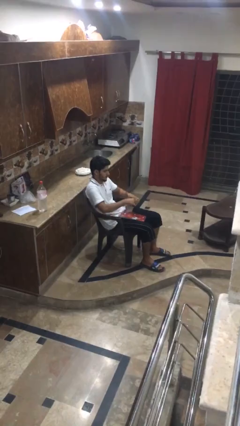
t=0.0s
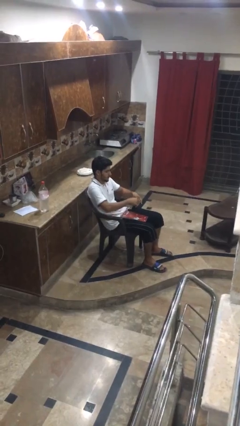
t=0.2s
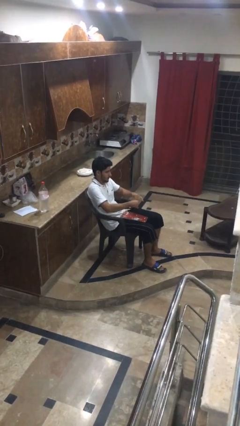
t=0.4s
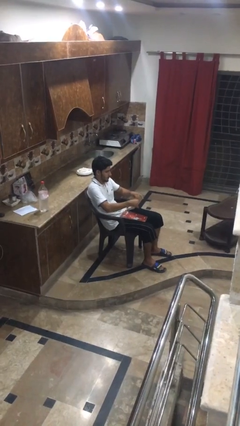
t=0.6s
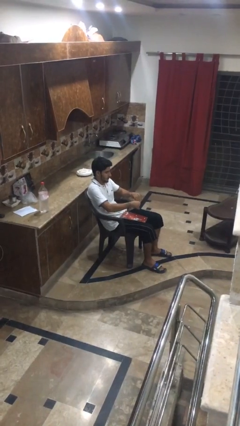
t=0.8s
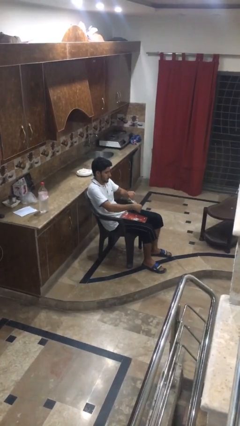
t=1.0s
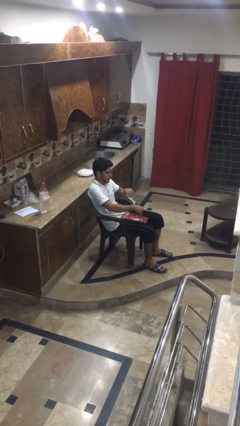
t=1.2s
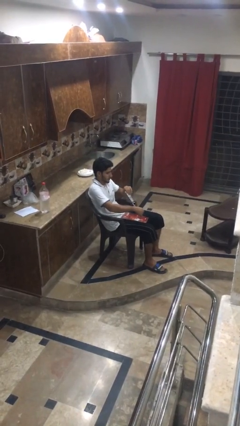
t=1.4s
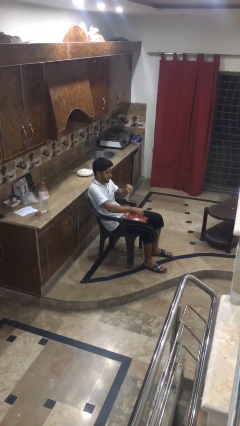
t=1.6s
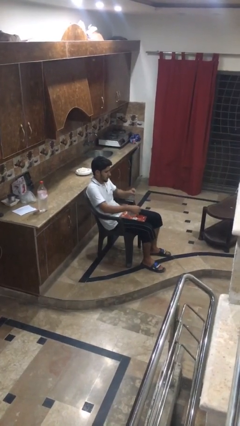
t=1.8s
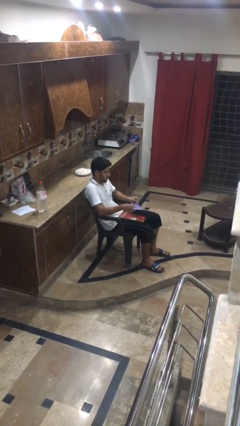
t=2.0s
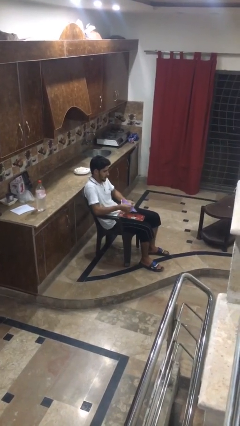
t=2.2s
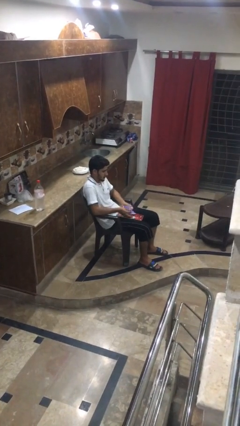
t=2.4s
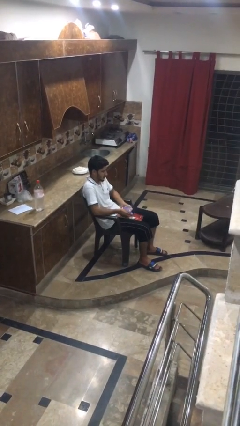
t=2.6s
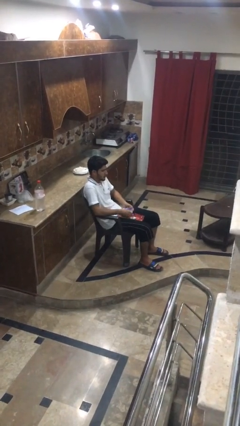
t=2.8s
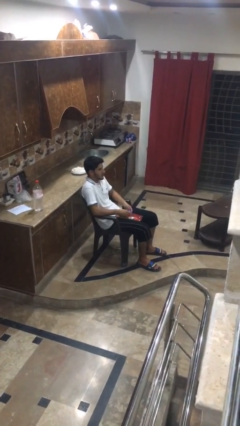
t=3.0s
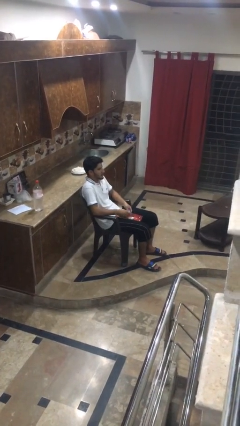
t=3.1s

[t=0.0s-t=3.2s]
person tears paper

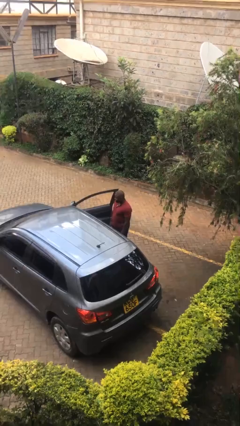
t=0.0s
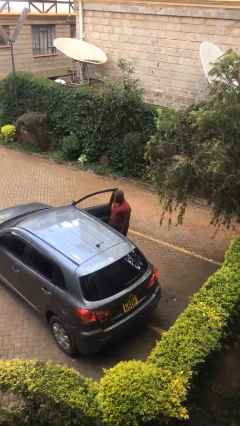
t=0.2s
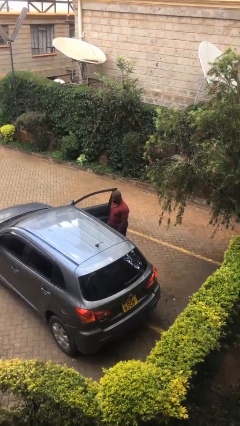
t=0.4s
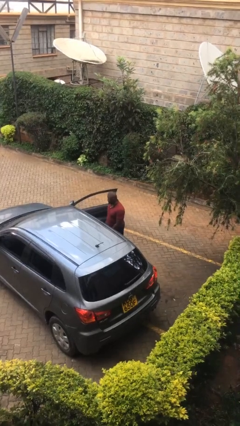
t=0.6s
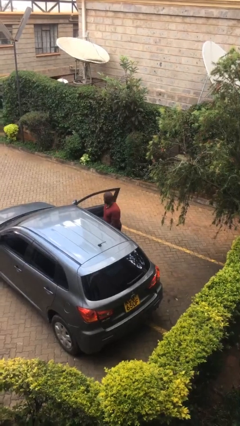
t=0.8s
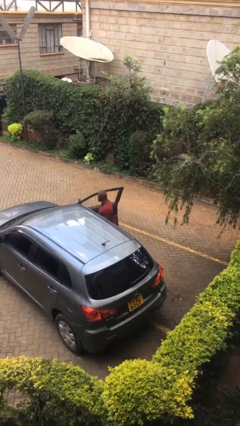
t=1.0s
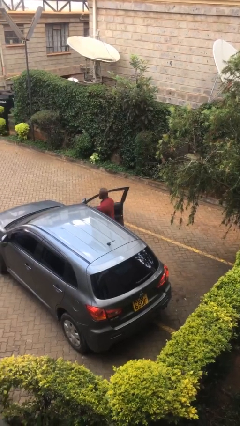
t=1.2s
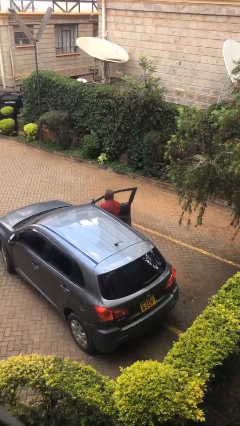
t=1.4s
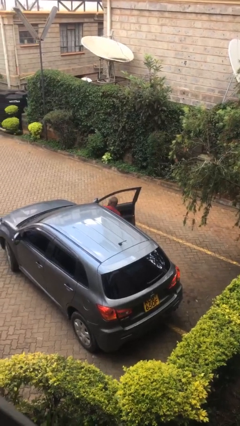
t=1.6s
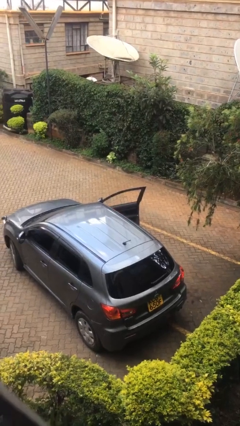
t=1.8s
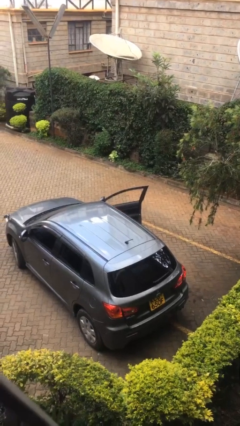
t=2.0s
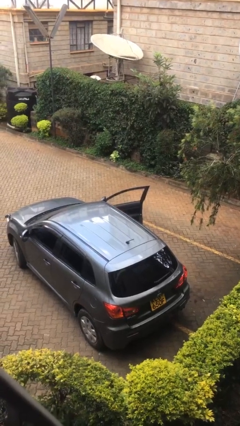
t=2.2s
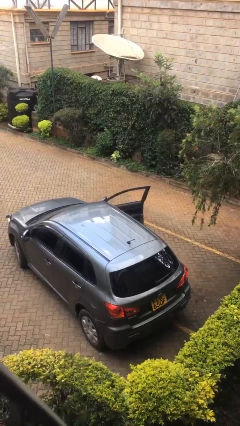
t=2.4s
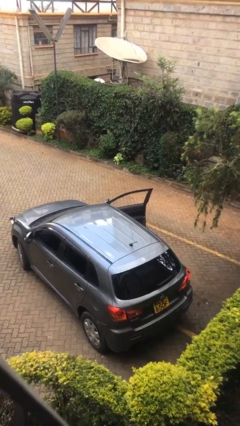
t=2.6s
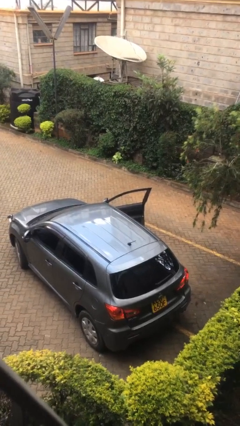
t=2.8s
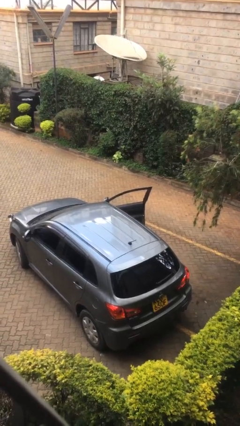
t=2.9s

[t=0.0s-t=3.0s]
person enters car

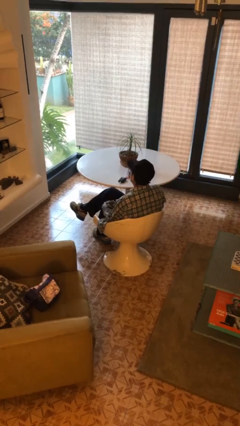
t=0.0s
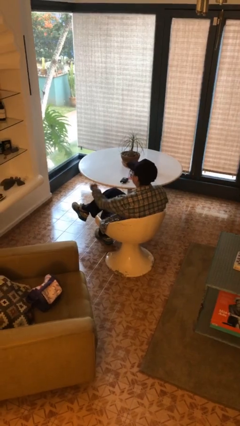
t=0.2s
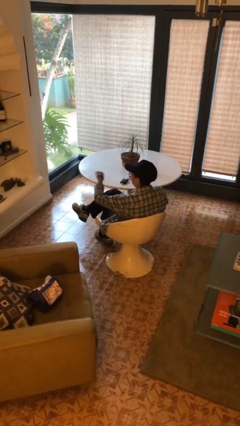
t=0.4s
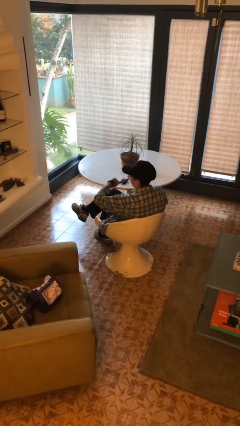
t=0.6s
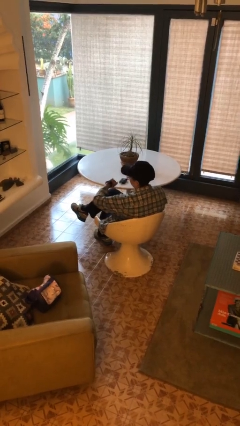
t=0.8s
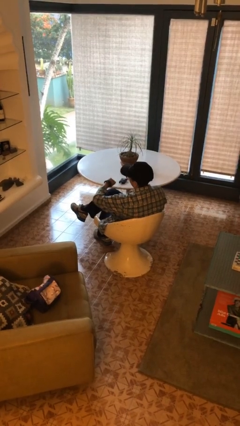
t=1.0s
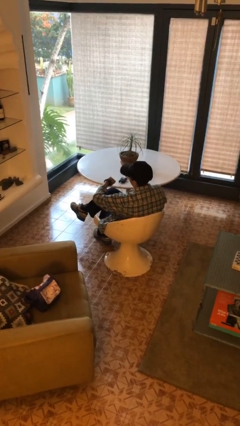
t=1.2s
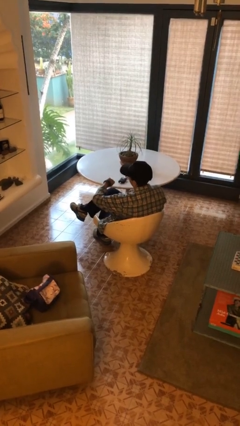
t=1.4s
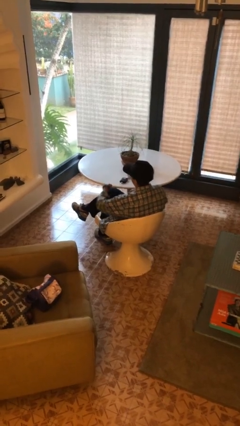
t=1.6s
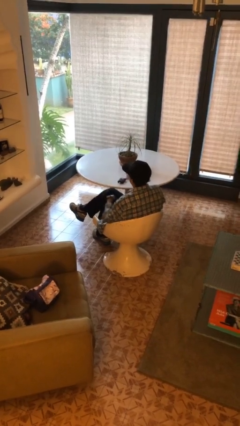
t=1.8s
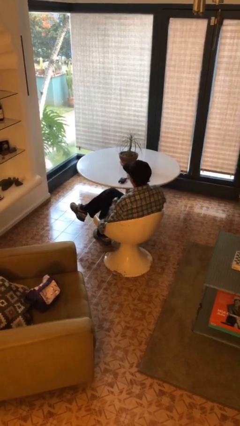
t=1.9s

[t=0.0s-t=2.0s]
person looks at wristwatch

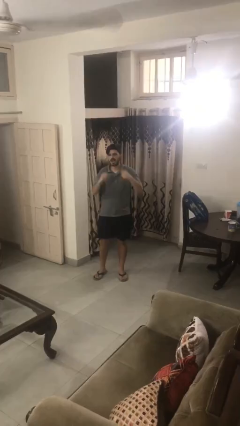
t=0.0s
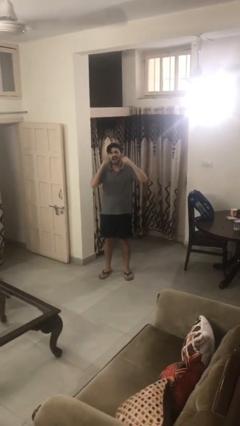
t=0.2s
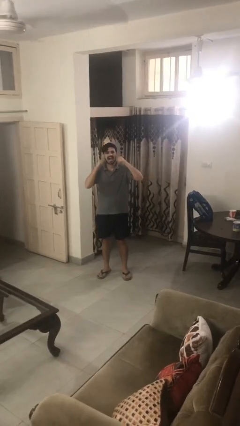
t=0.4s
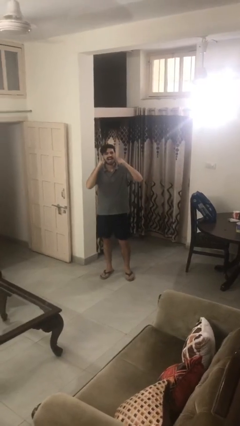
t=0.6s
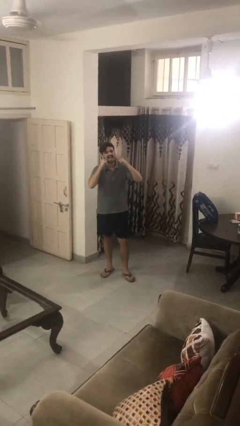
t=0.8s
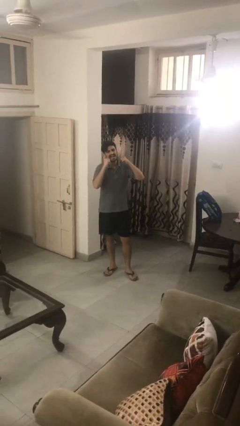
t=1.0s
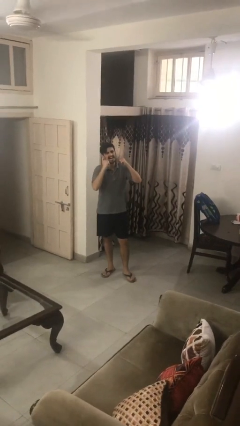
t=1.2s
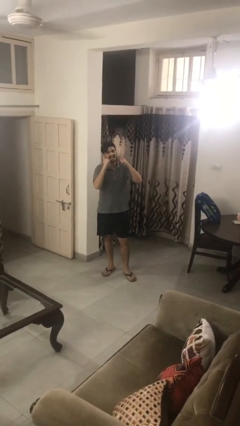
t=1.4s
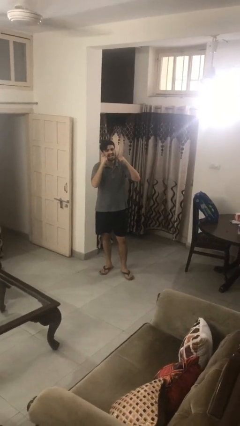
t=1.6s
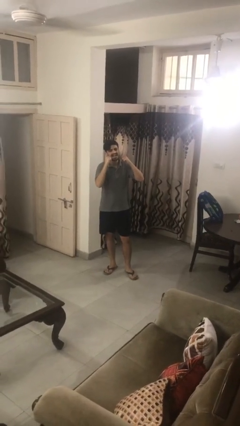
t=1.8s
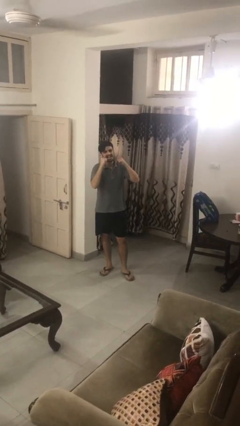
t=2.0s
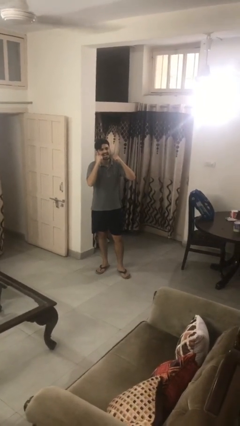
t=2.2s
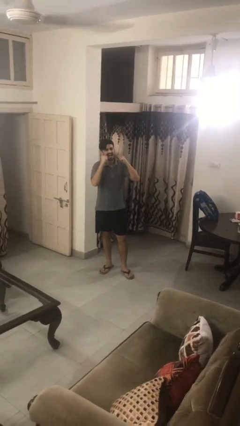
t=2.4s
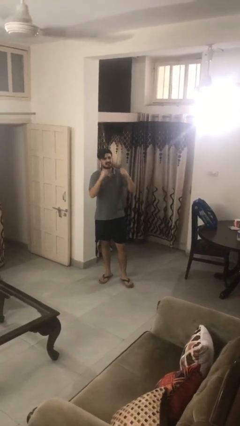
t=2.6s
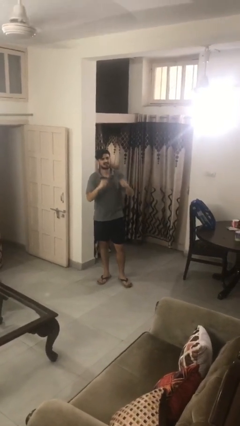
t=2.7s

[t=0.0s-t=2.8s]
person flosses

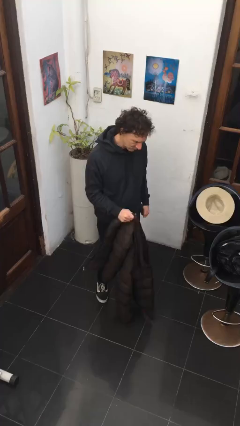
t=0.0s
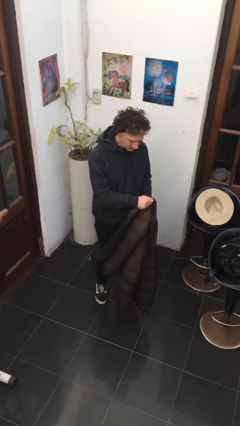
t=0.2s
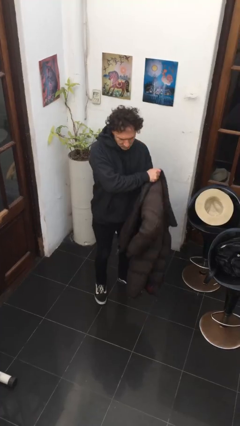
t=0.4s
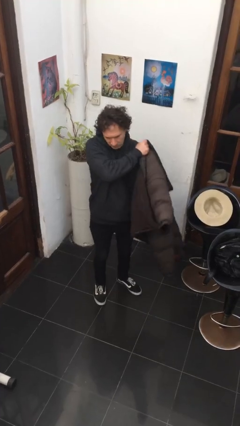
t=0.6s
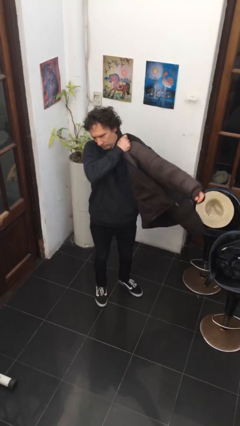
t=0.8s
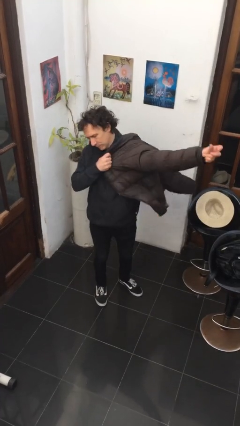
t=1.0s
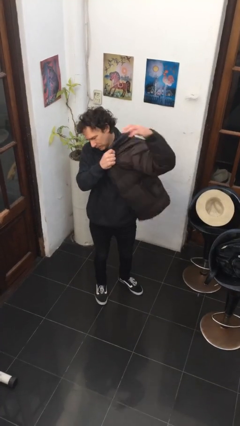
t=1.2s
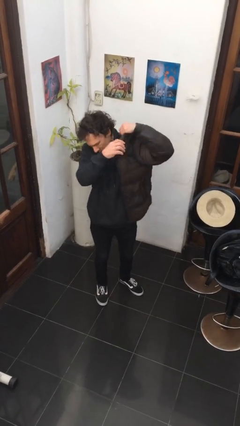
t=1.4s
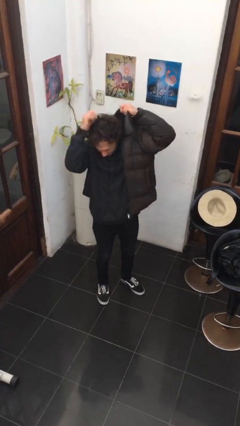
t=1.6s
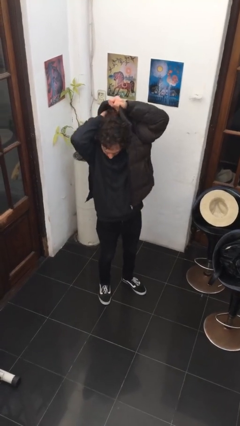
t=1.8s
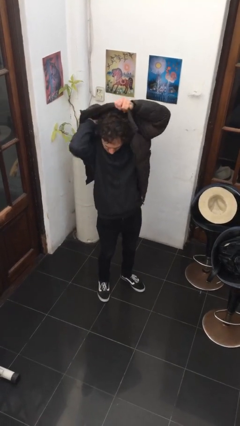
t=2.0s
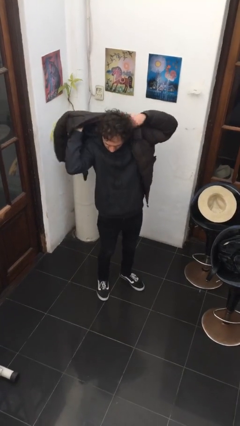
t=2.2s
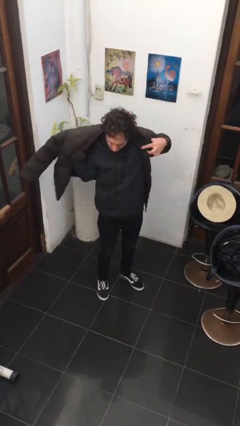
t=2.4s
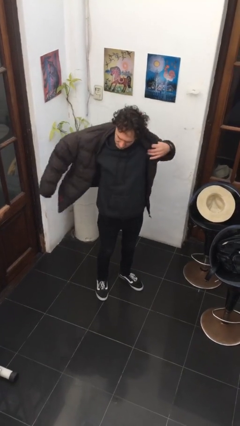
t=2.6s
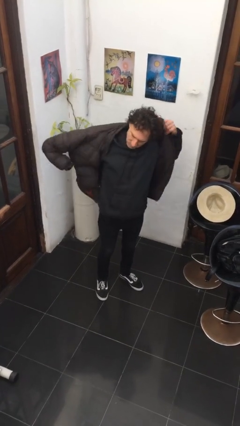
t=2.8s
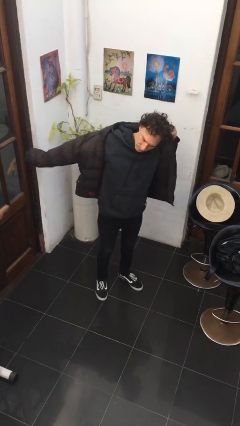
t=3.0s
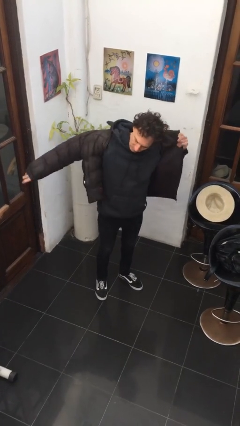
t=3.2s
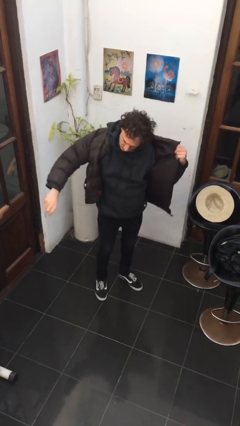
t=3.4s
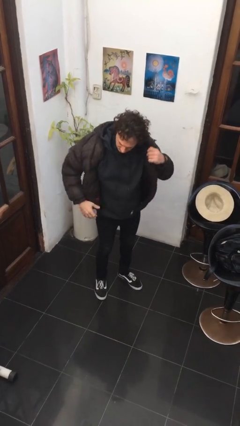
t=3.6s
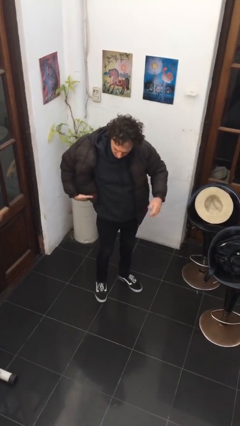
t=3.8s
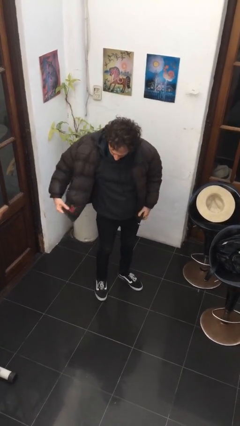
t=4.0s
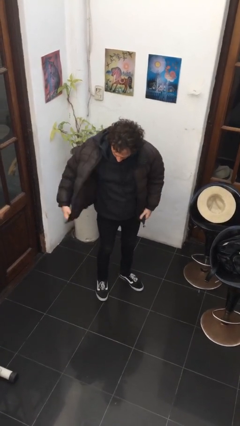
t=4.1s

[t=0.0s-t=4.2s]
person puts on jacket

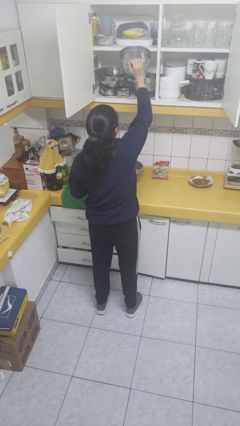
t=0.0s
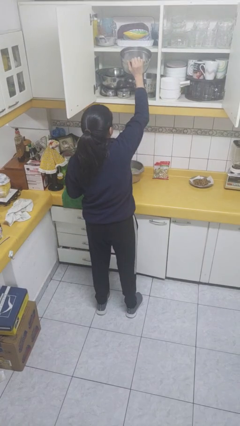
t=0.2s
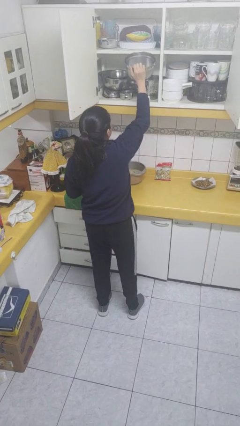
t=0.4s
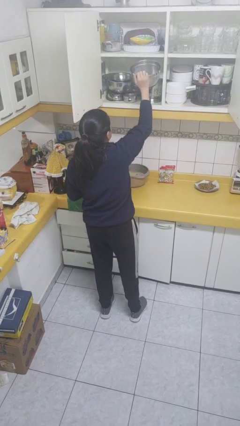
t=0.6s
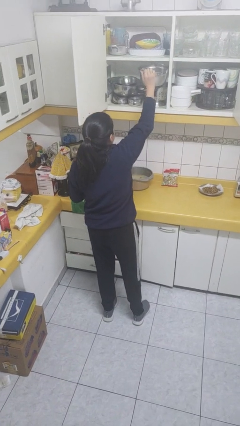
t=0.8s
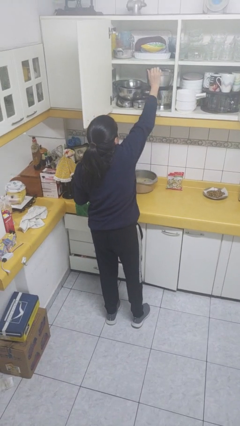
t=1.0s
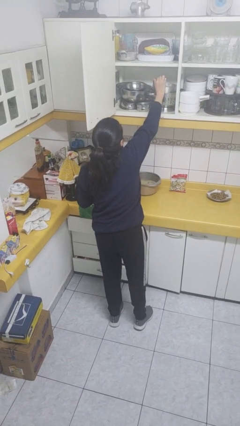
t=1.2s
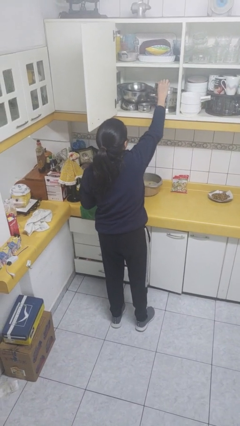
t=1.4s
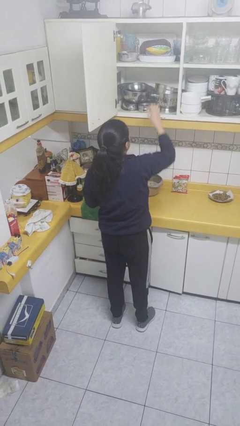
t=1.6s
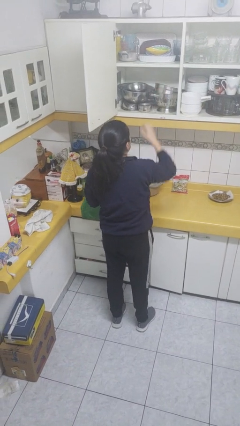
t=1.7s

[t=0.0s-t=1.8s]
person puts down object into cabinet

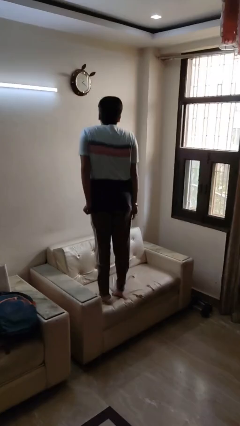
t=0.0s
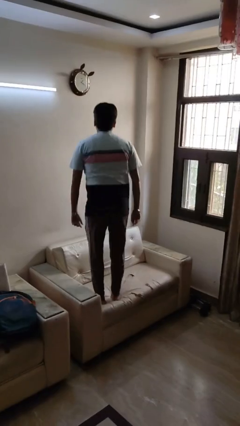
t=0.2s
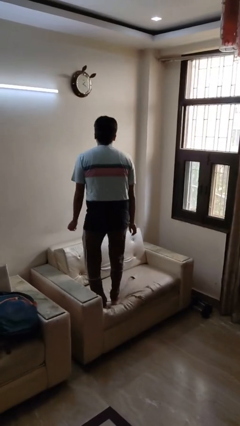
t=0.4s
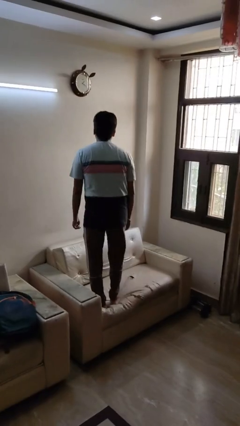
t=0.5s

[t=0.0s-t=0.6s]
person jumps on couch
